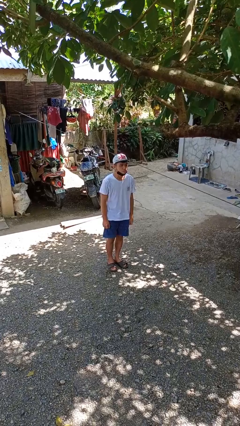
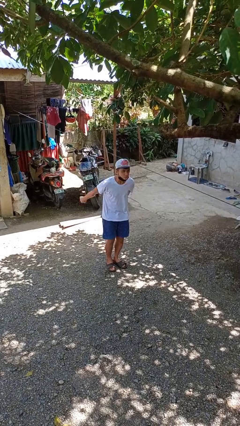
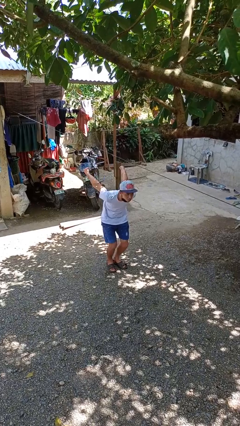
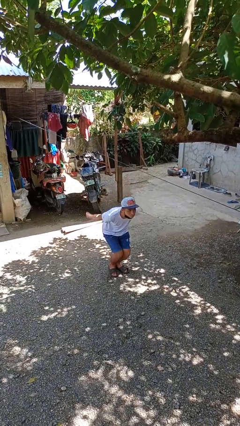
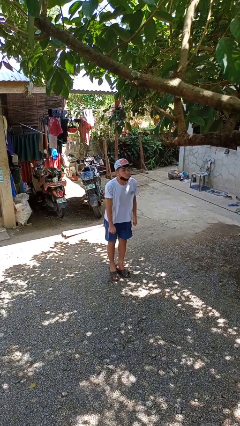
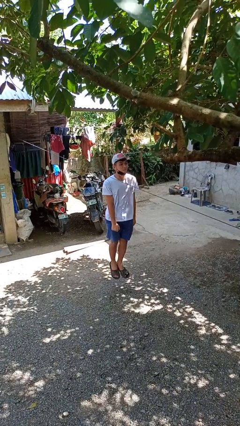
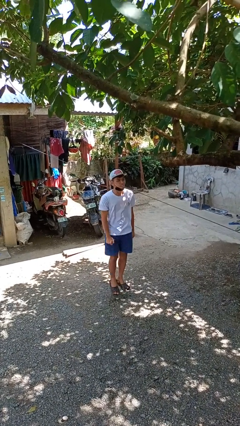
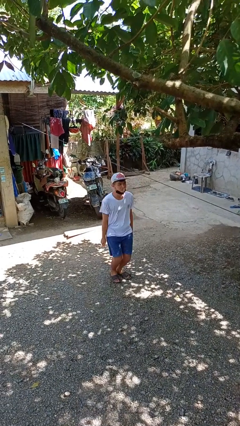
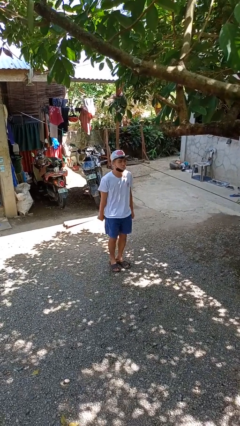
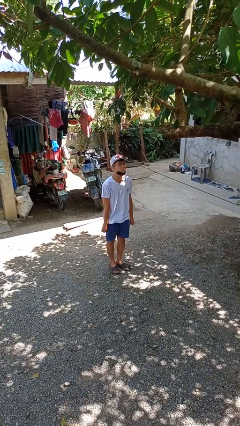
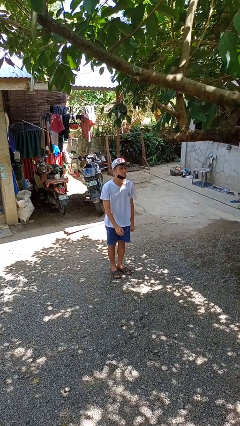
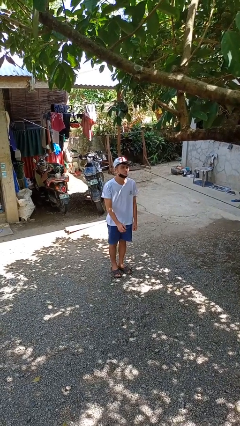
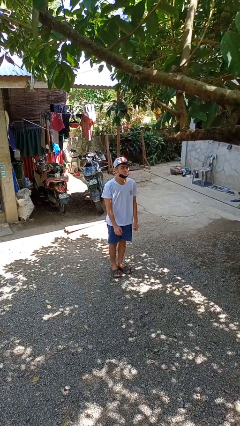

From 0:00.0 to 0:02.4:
person jumps

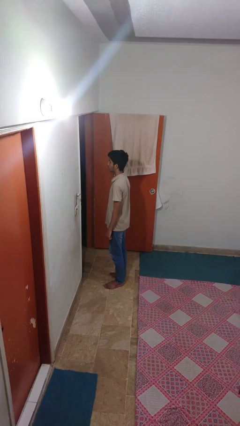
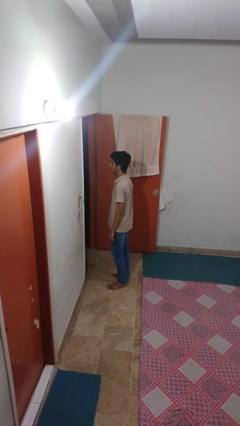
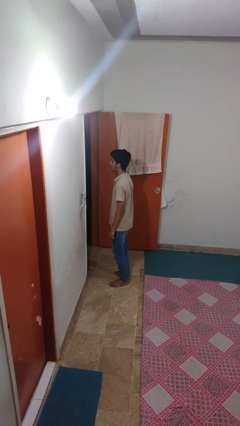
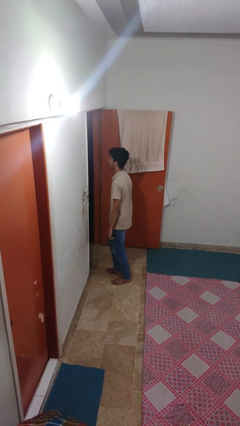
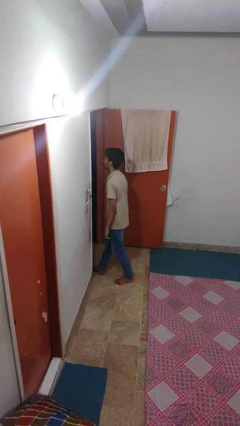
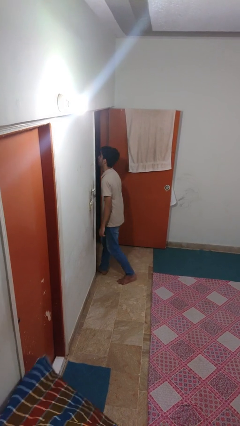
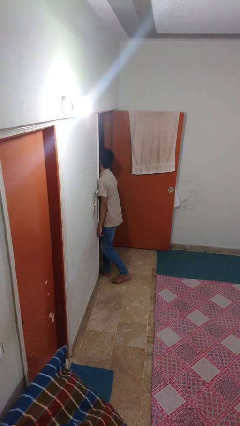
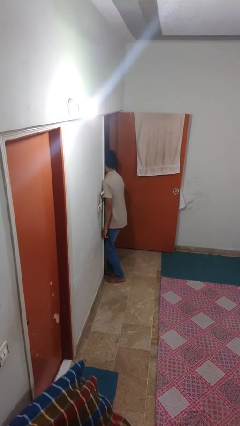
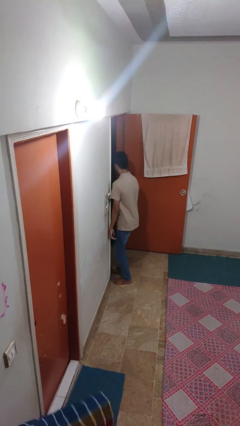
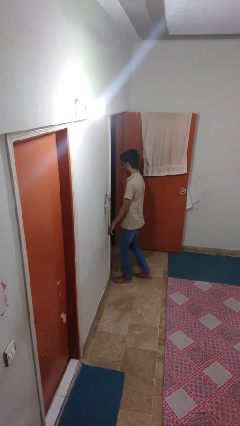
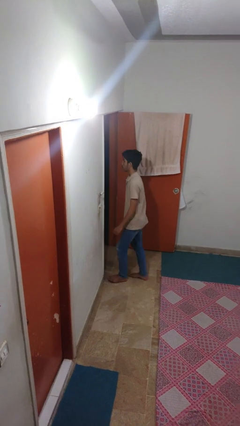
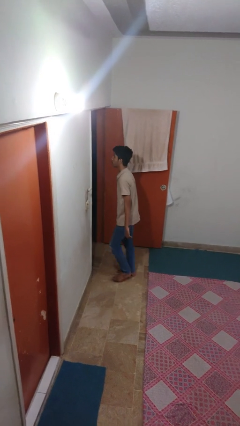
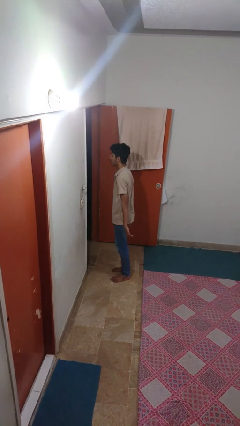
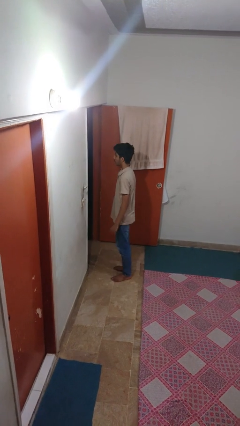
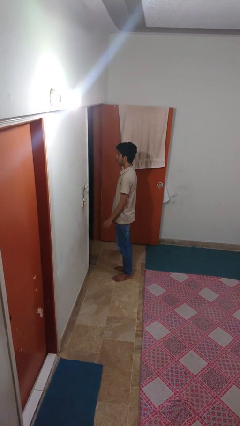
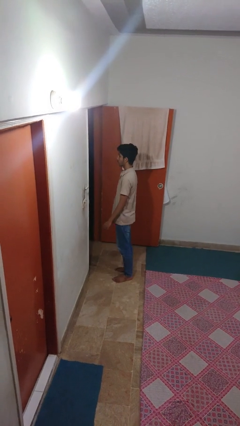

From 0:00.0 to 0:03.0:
person bumps into wall

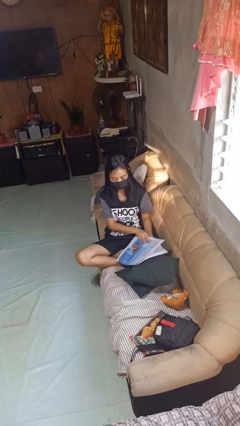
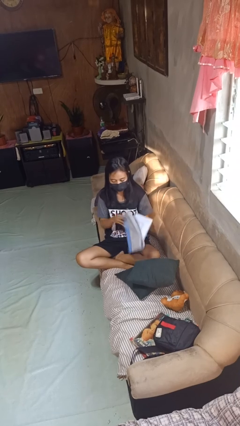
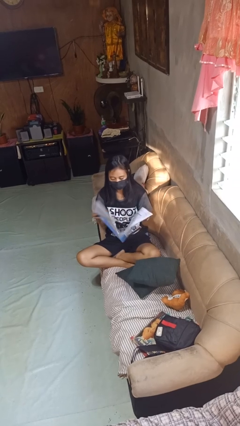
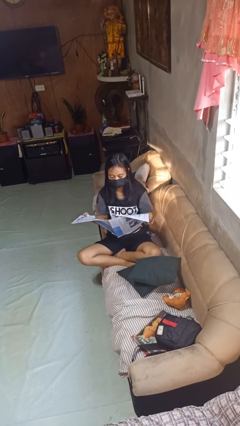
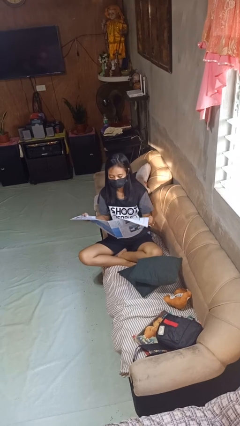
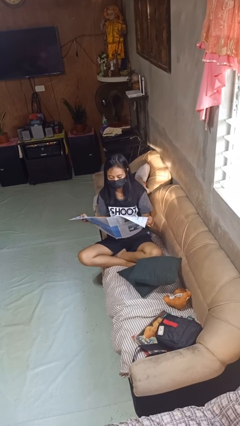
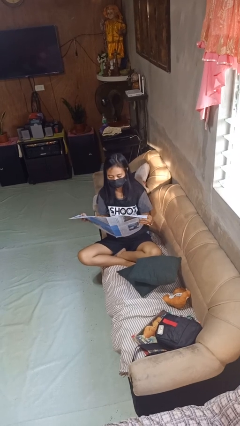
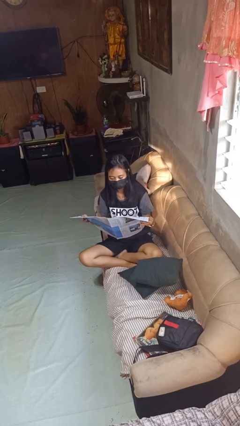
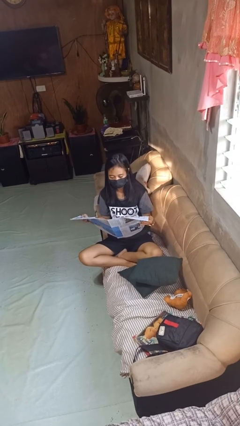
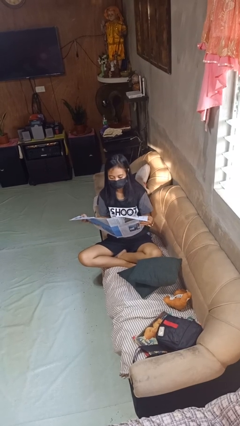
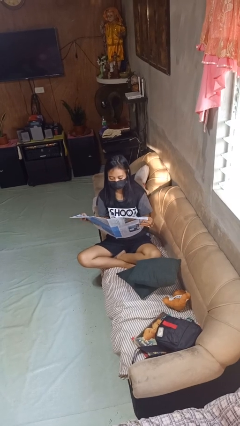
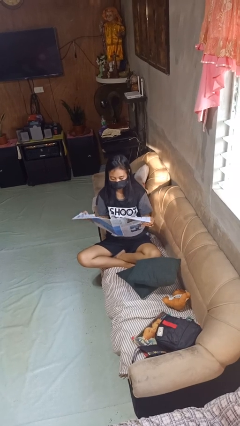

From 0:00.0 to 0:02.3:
person reads newspaper

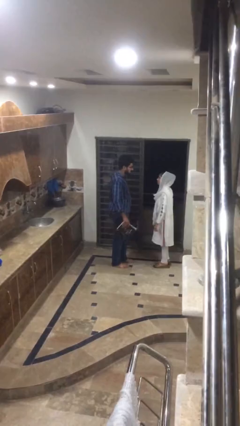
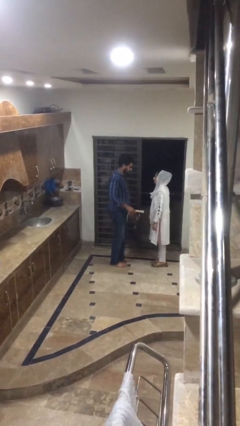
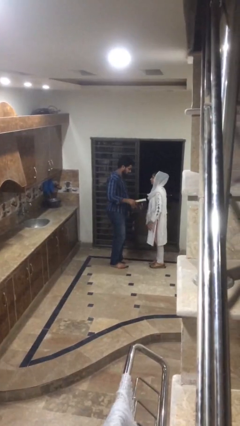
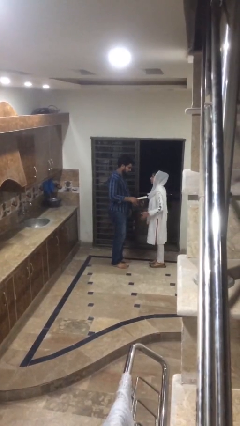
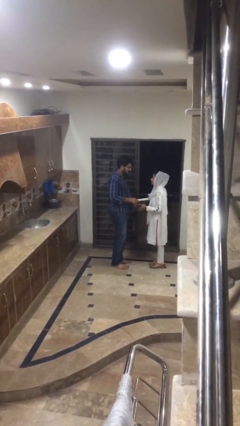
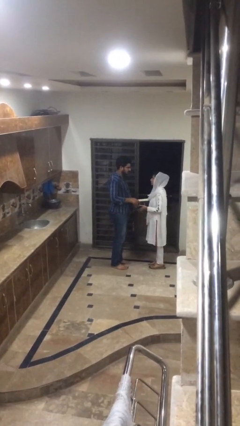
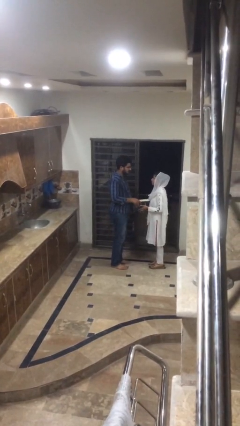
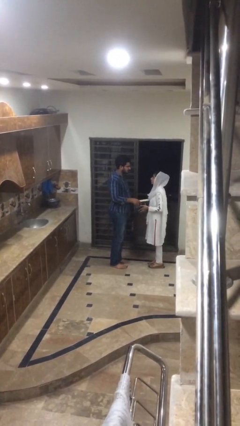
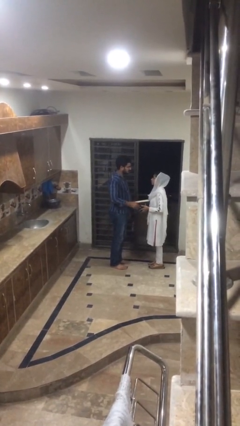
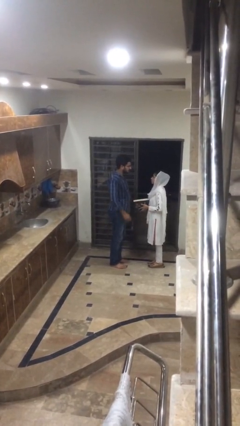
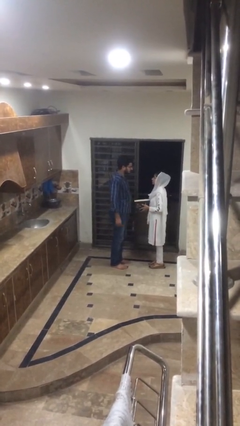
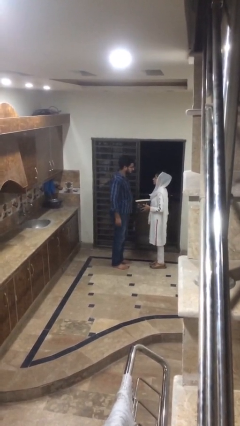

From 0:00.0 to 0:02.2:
person transfers object to person

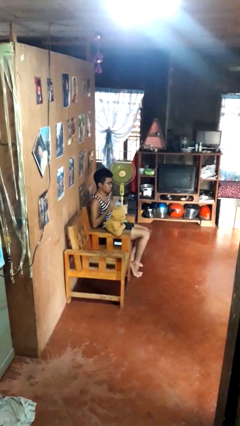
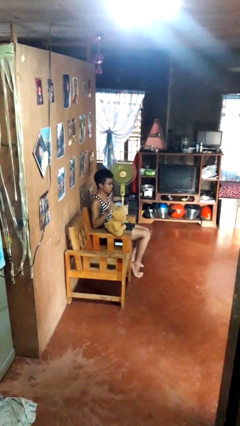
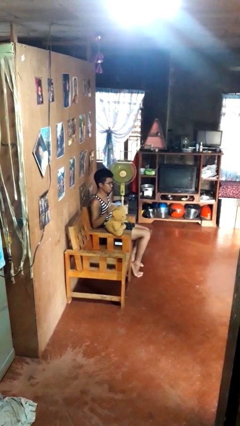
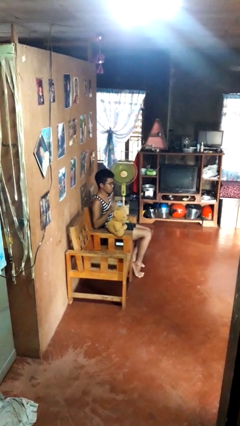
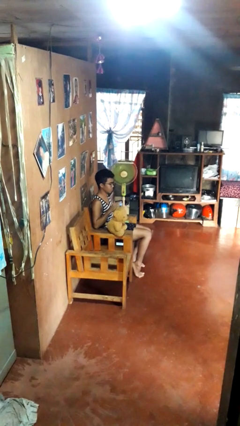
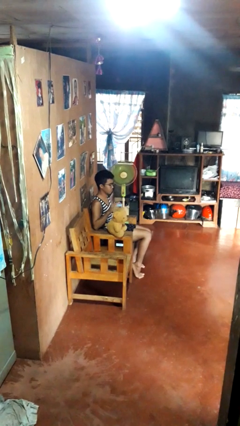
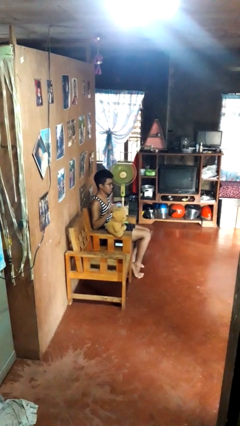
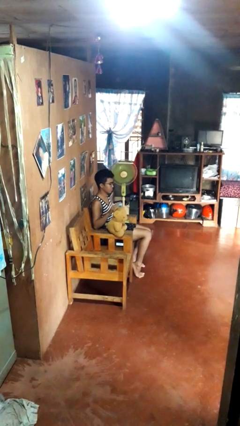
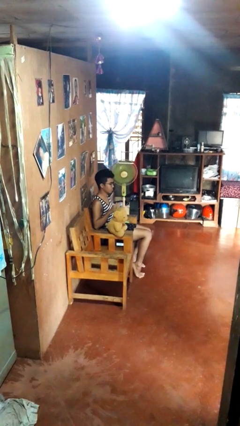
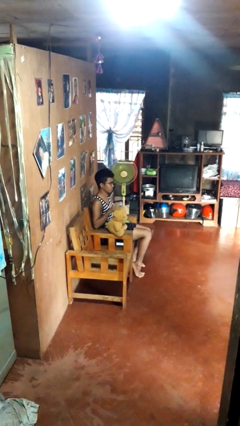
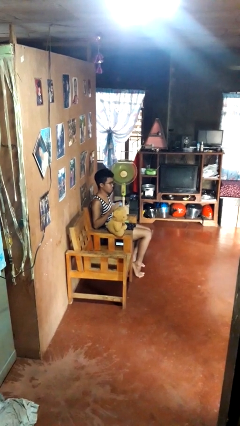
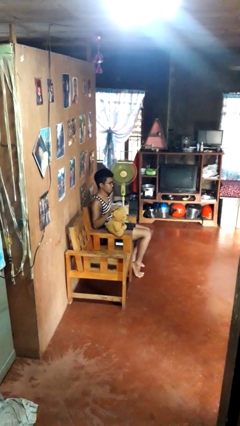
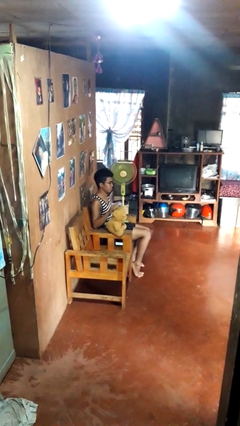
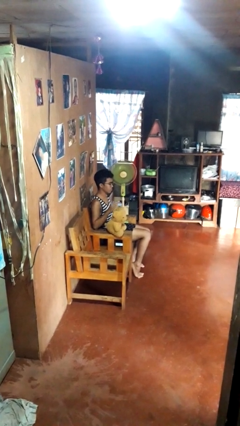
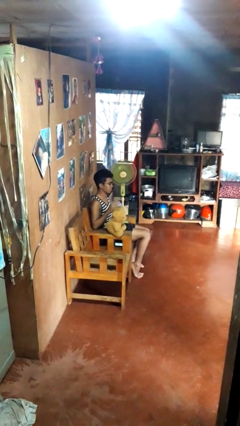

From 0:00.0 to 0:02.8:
person waves hand over object

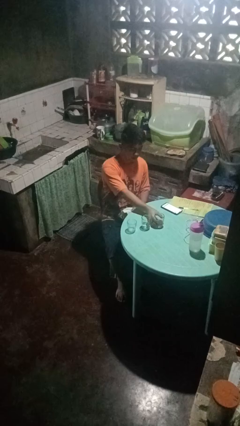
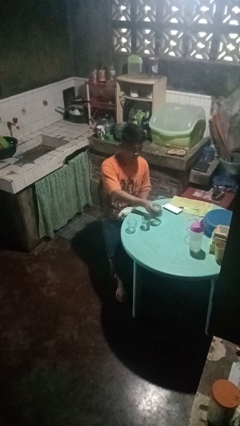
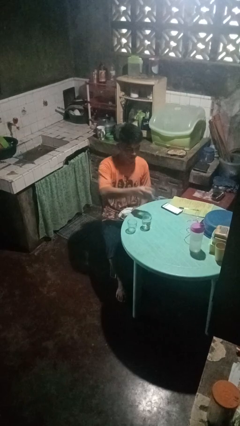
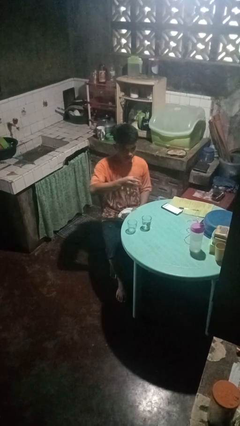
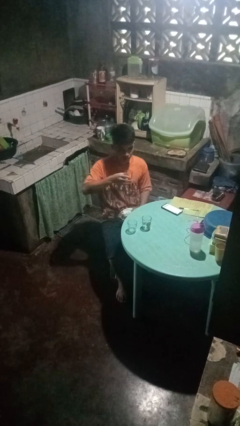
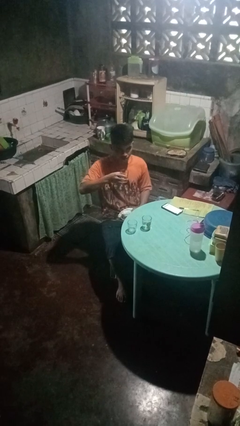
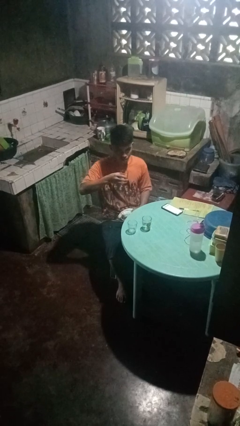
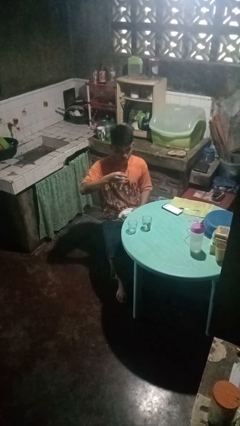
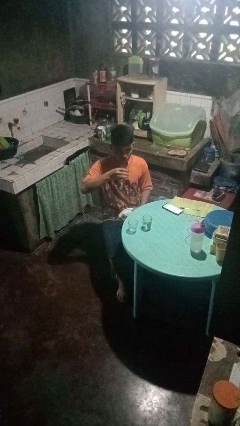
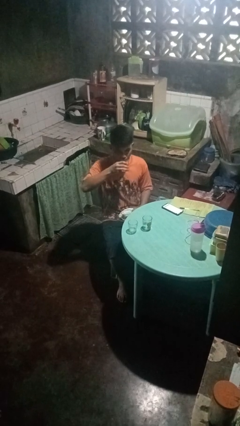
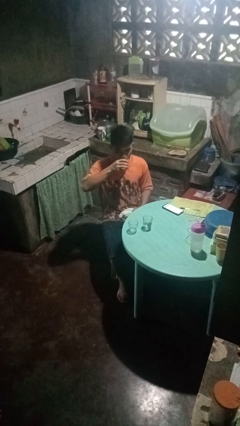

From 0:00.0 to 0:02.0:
person picks up object from table

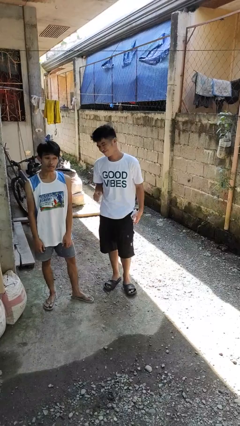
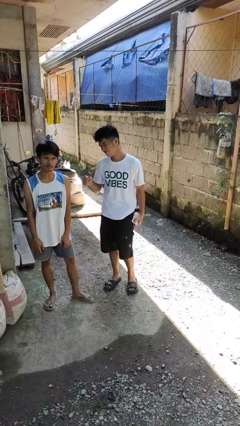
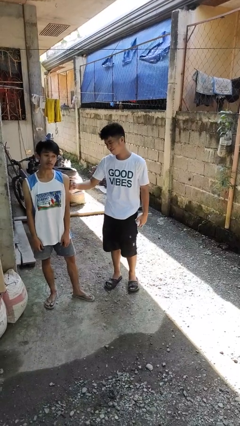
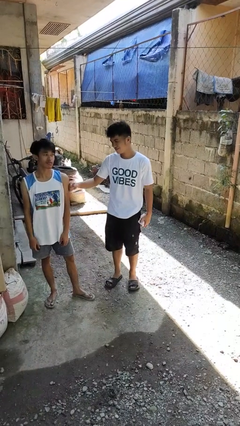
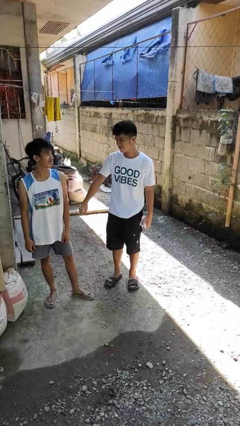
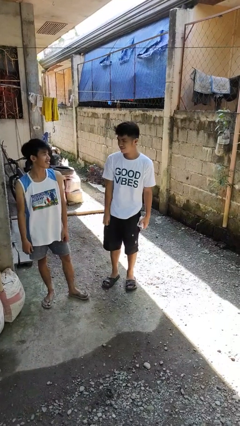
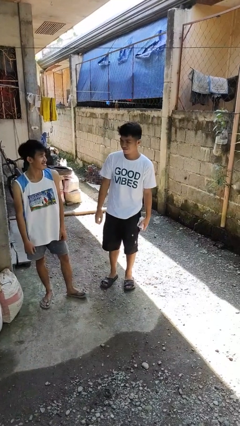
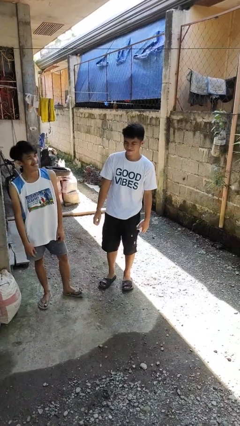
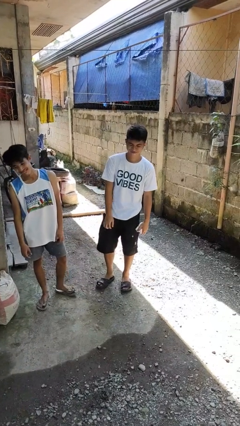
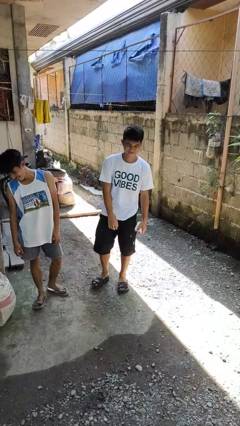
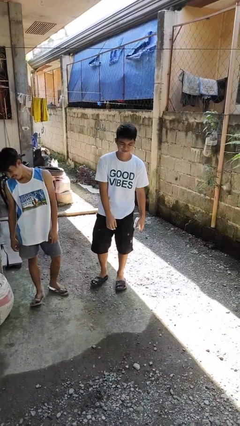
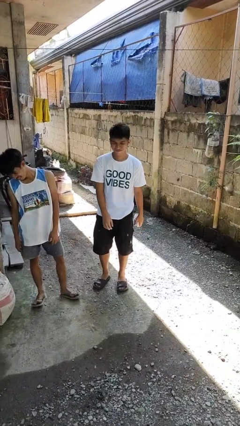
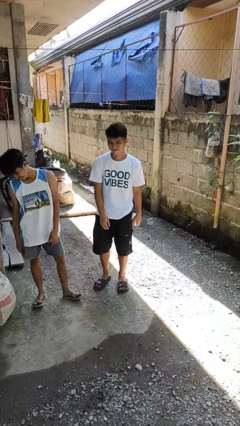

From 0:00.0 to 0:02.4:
person pounds shoulders of person
